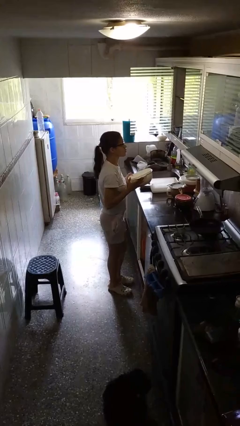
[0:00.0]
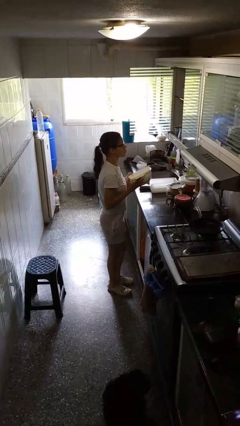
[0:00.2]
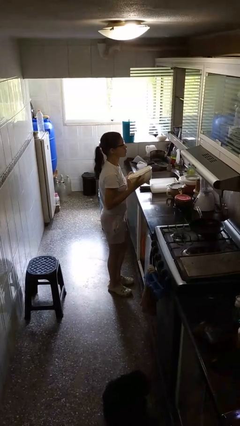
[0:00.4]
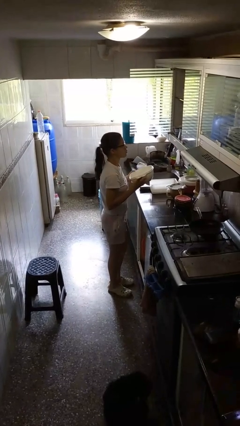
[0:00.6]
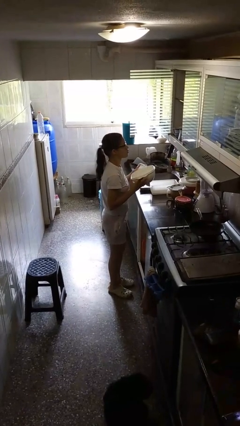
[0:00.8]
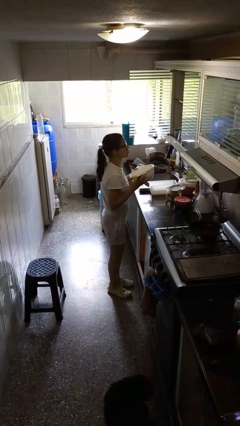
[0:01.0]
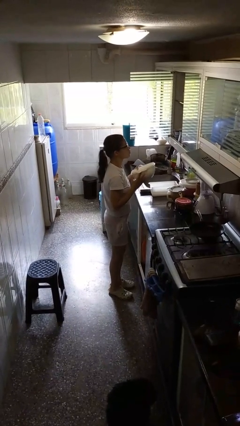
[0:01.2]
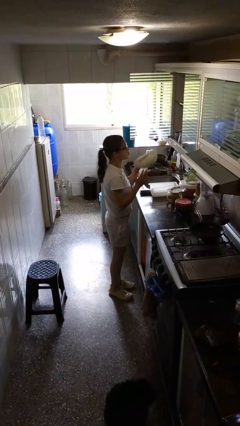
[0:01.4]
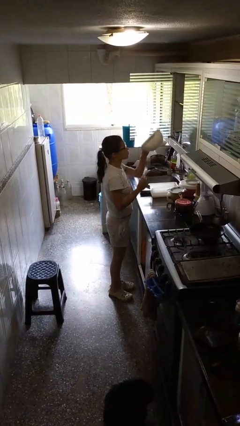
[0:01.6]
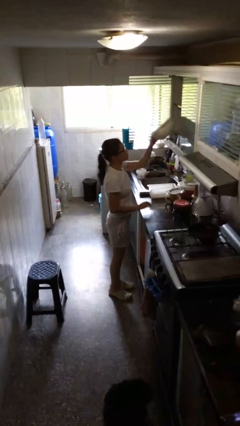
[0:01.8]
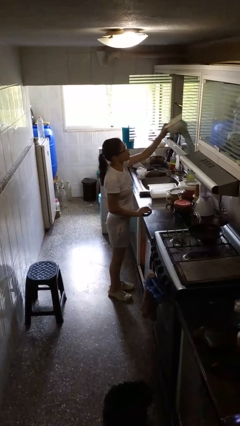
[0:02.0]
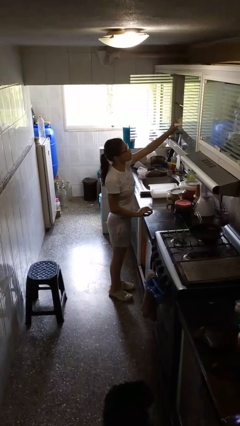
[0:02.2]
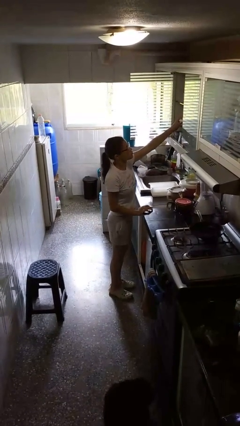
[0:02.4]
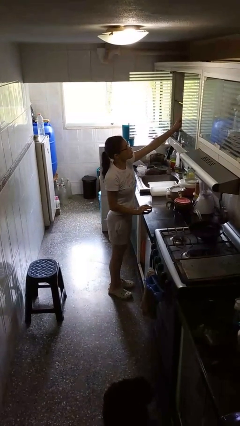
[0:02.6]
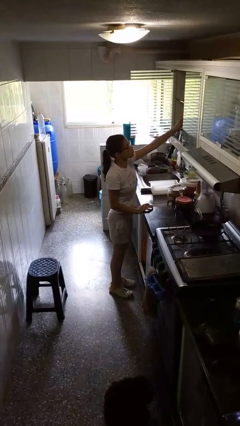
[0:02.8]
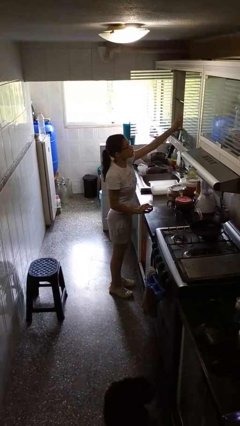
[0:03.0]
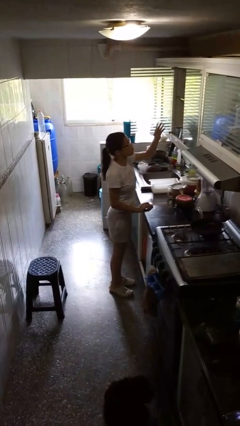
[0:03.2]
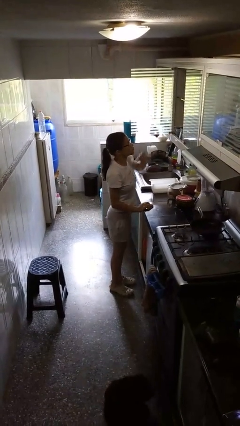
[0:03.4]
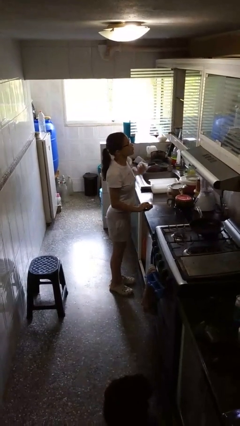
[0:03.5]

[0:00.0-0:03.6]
person puts down object into cabinet

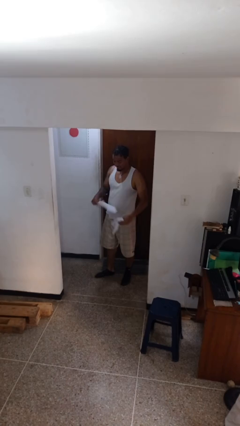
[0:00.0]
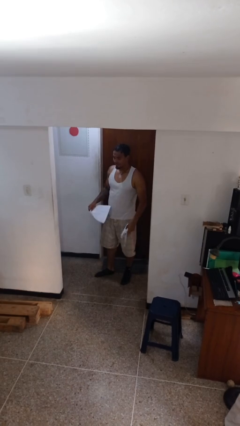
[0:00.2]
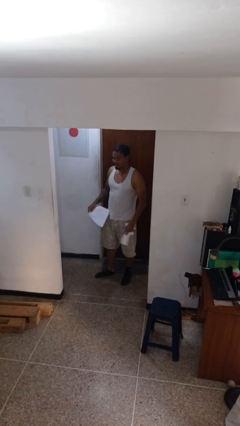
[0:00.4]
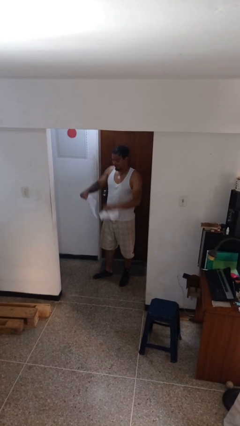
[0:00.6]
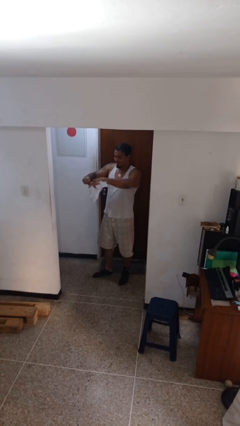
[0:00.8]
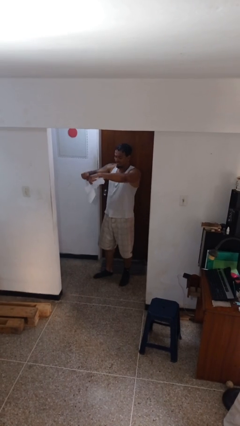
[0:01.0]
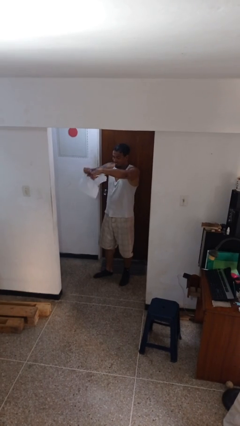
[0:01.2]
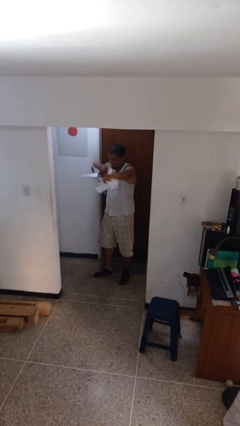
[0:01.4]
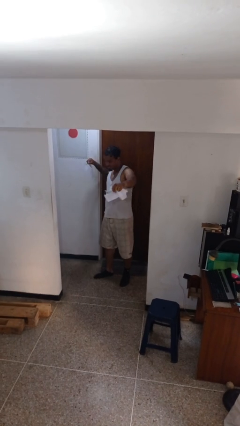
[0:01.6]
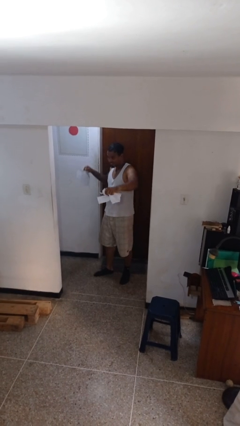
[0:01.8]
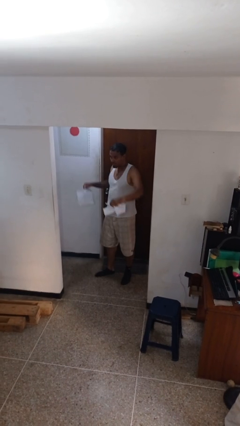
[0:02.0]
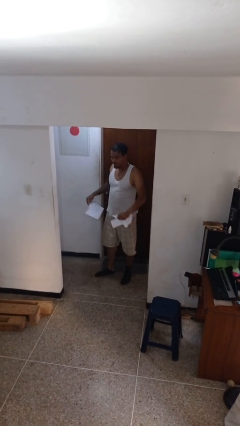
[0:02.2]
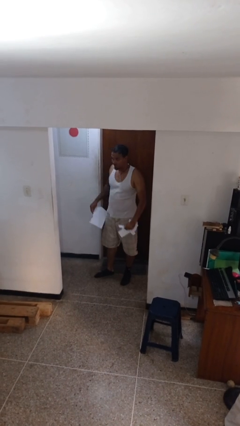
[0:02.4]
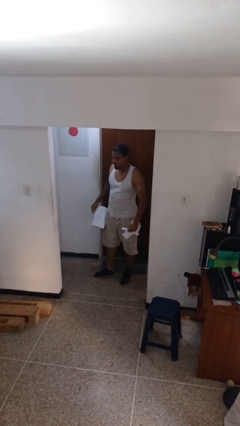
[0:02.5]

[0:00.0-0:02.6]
person tears paper

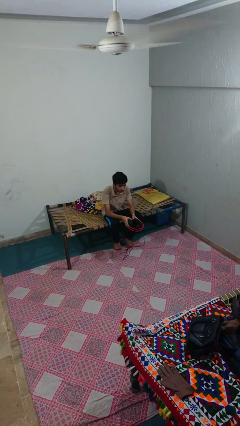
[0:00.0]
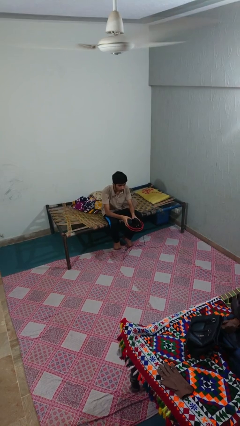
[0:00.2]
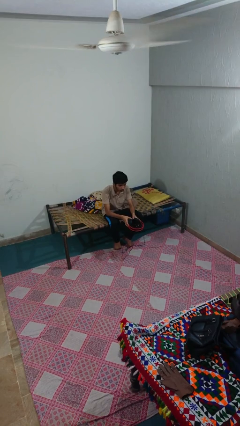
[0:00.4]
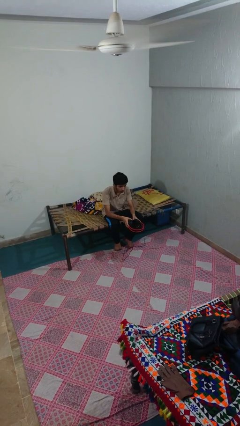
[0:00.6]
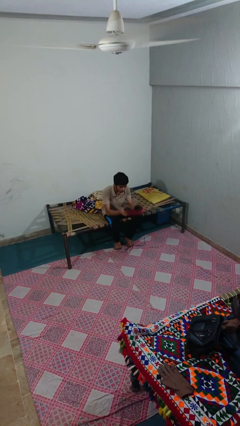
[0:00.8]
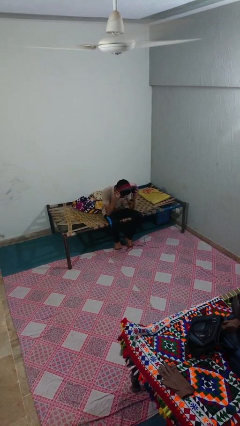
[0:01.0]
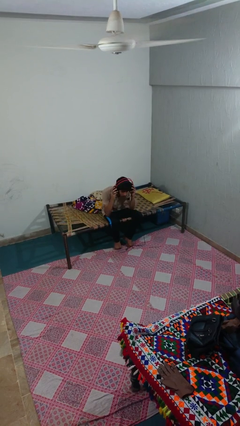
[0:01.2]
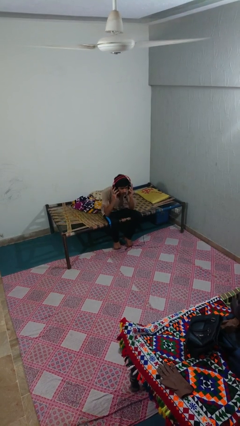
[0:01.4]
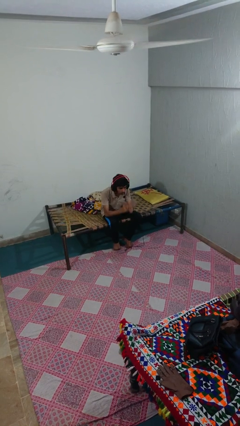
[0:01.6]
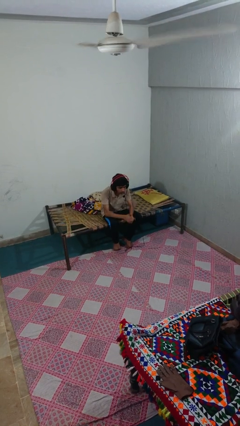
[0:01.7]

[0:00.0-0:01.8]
person puts on headphones

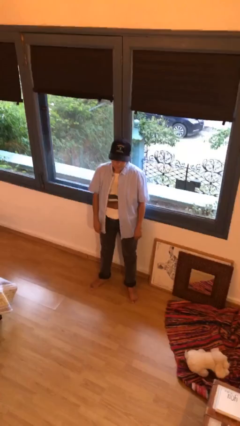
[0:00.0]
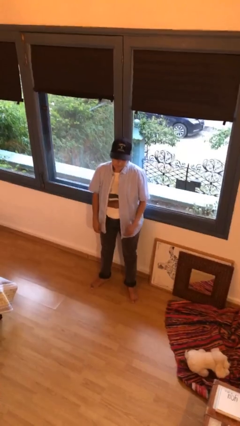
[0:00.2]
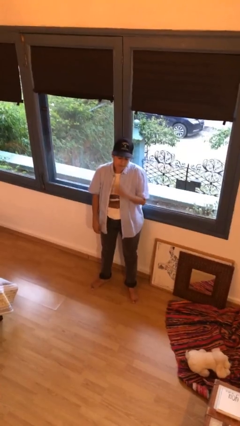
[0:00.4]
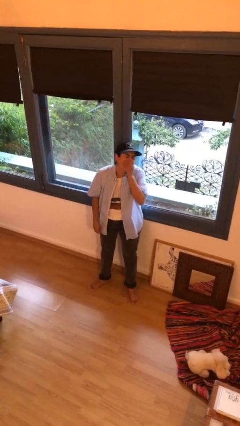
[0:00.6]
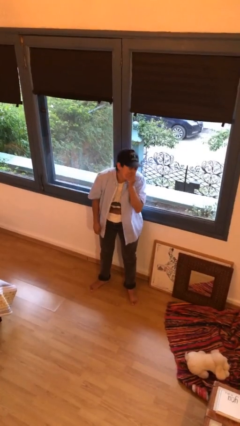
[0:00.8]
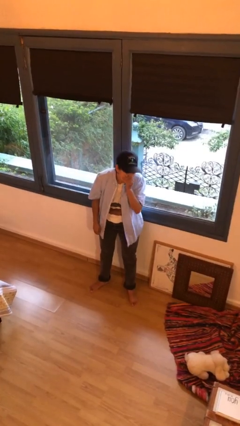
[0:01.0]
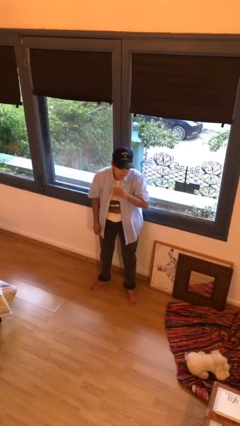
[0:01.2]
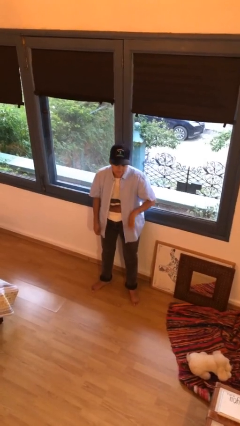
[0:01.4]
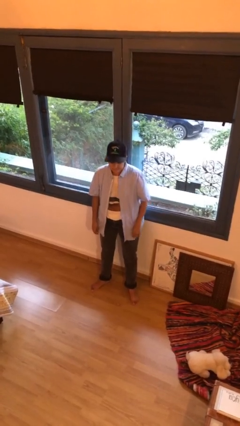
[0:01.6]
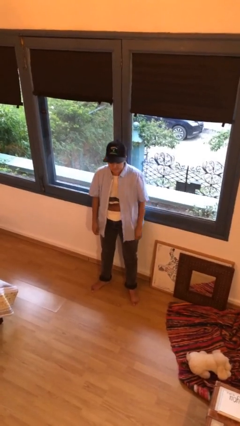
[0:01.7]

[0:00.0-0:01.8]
person sneezes into hand

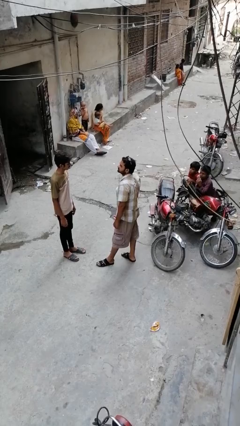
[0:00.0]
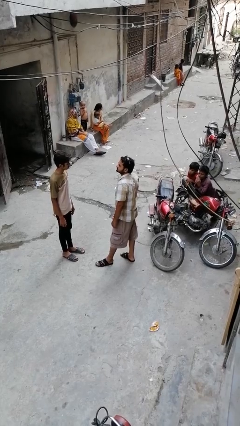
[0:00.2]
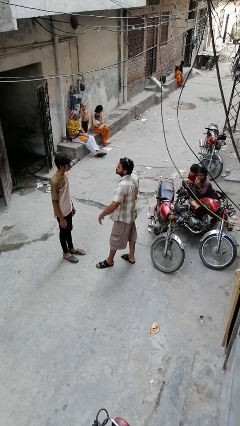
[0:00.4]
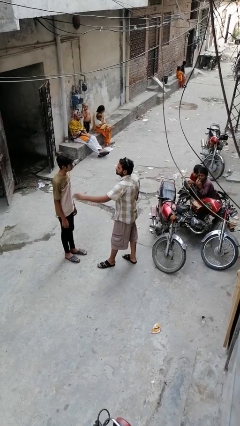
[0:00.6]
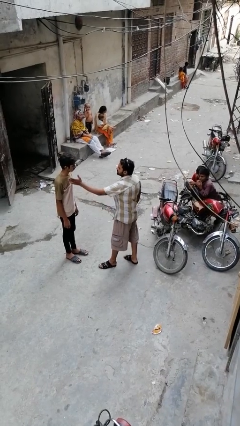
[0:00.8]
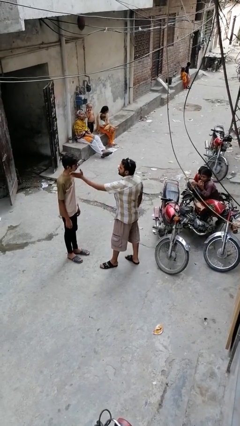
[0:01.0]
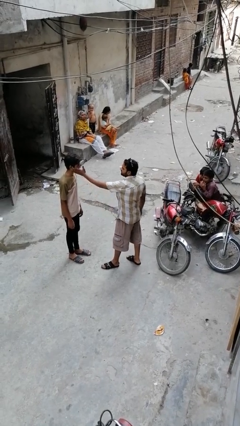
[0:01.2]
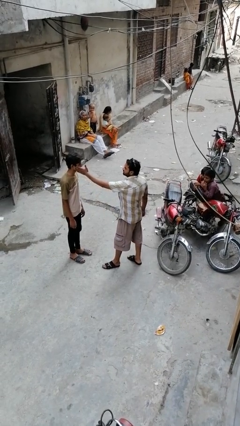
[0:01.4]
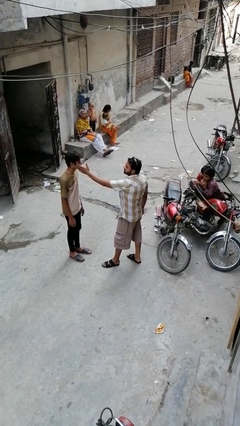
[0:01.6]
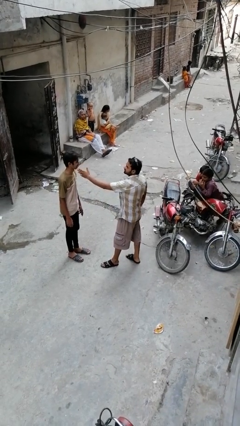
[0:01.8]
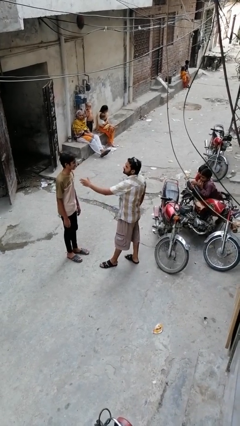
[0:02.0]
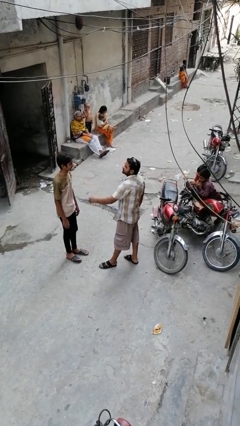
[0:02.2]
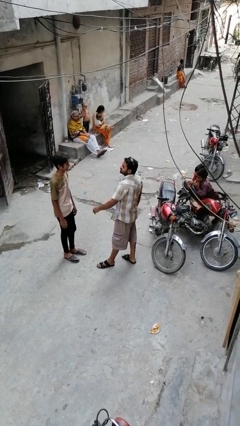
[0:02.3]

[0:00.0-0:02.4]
person touches face of person

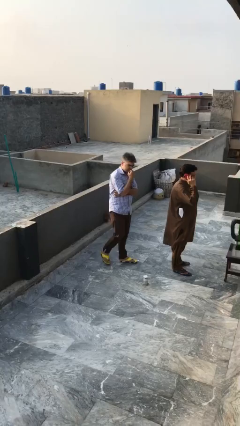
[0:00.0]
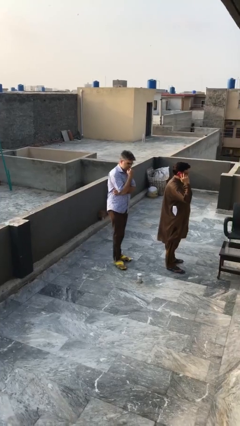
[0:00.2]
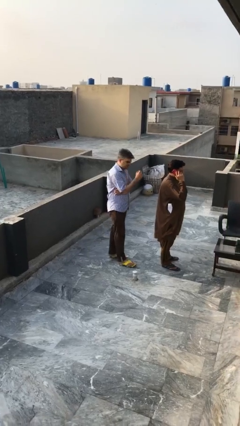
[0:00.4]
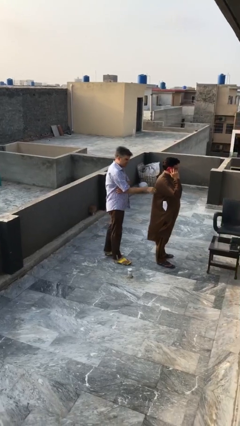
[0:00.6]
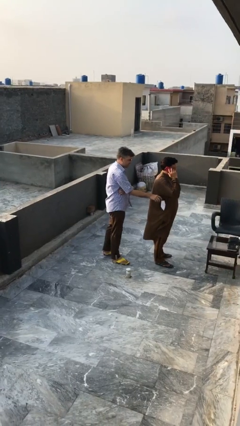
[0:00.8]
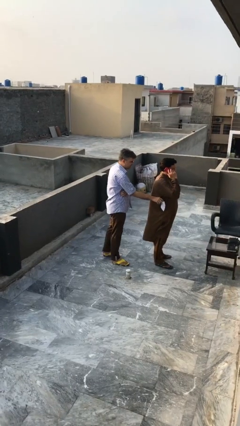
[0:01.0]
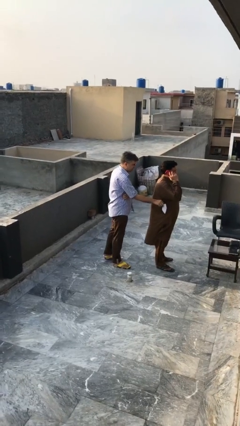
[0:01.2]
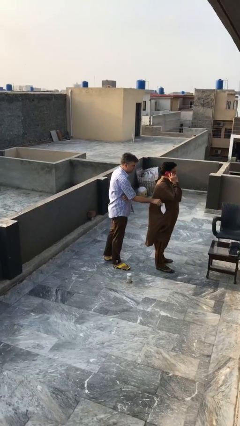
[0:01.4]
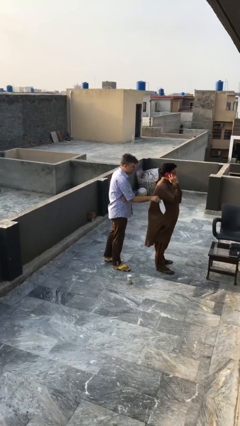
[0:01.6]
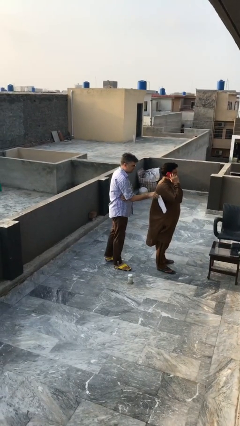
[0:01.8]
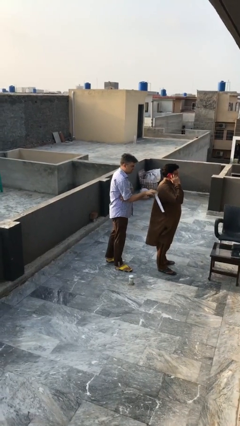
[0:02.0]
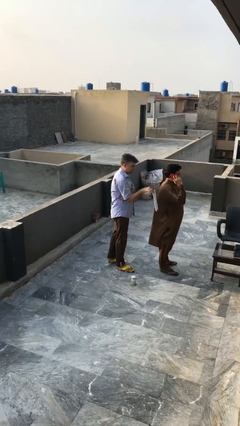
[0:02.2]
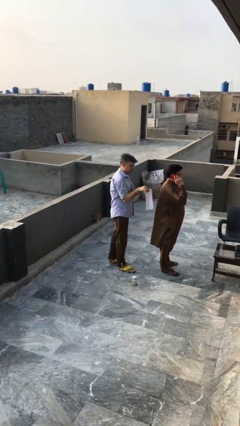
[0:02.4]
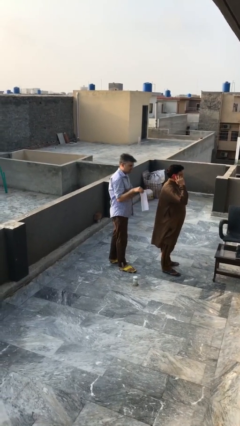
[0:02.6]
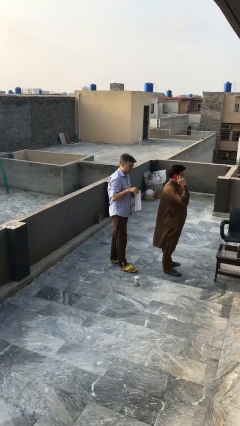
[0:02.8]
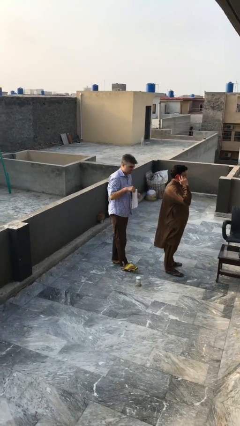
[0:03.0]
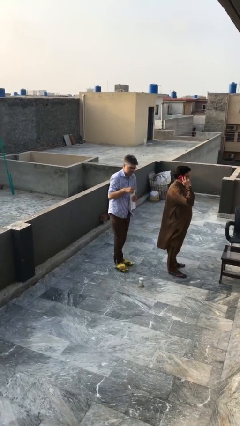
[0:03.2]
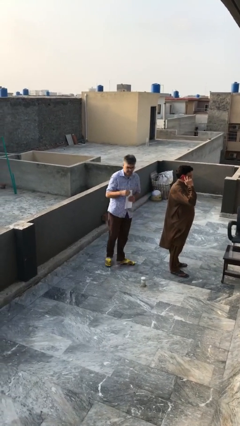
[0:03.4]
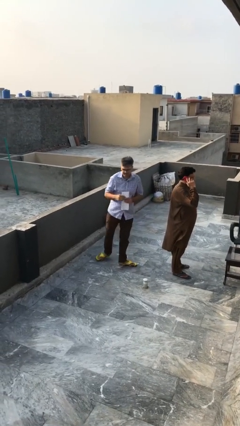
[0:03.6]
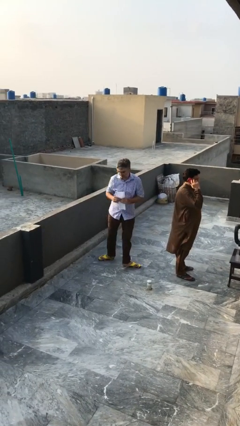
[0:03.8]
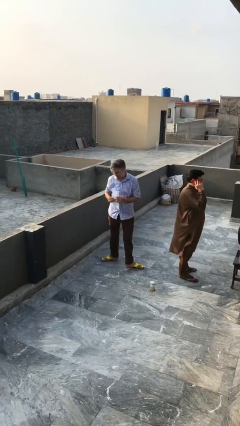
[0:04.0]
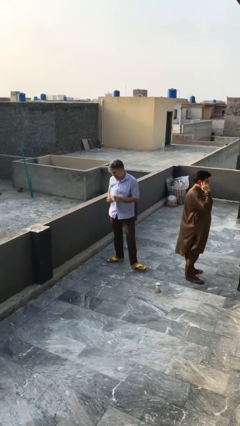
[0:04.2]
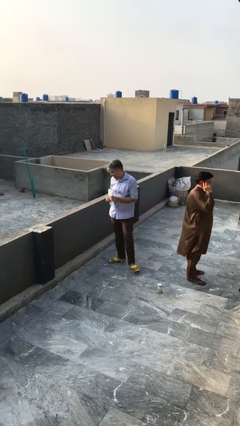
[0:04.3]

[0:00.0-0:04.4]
person steals object from person

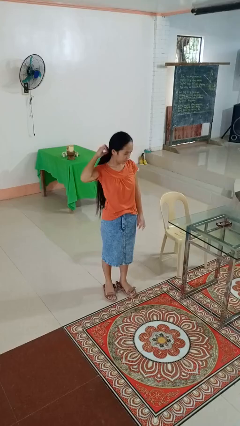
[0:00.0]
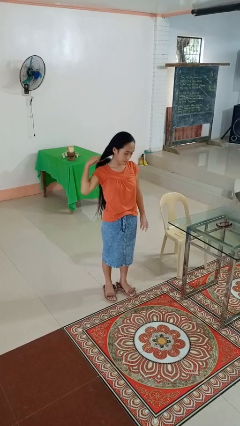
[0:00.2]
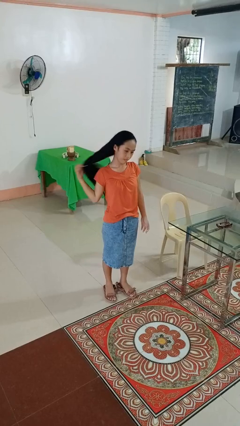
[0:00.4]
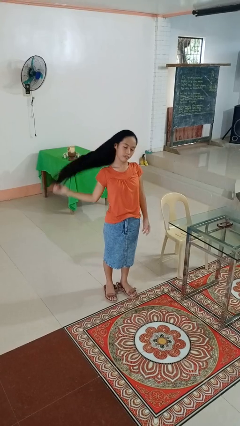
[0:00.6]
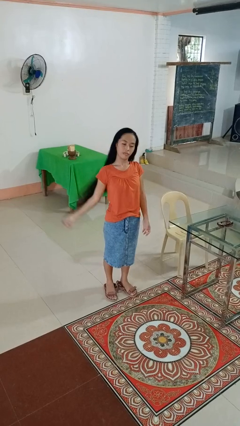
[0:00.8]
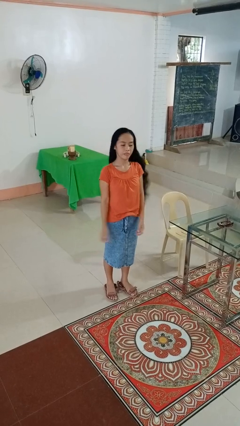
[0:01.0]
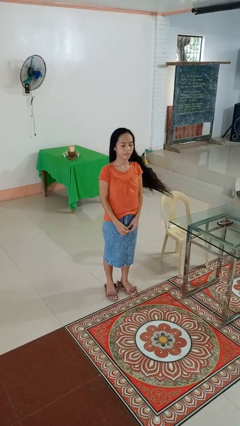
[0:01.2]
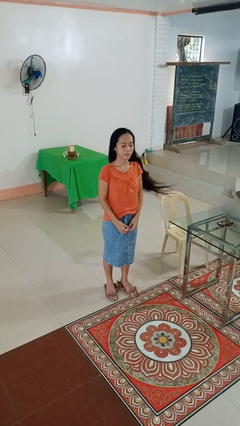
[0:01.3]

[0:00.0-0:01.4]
person takes off hairtie
